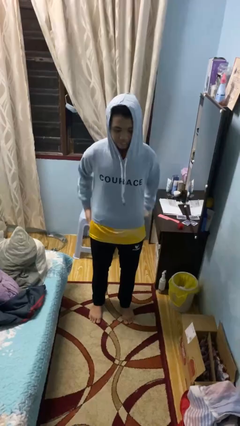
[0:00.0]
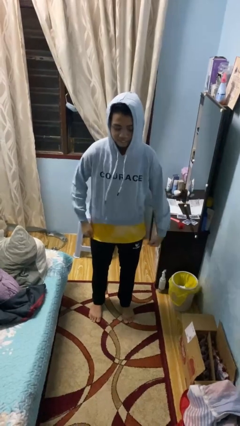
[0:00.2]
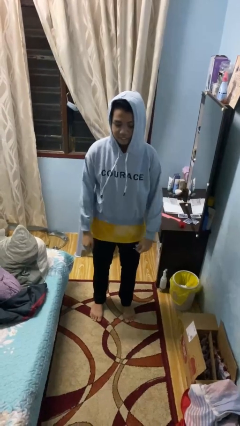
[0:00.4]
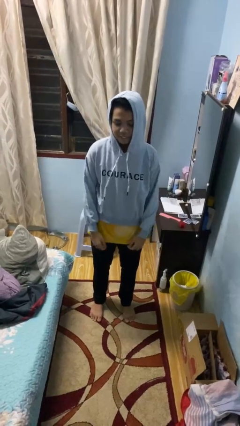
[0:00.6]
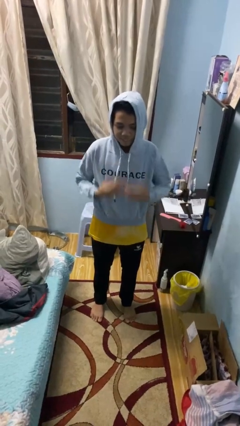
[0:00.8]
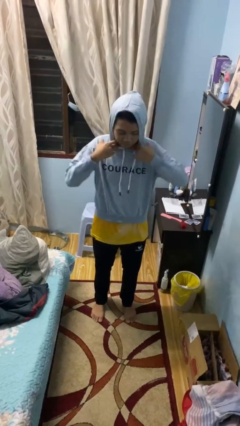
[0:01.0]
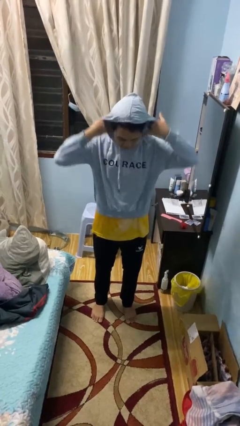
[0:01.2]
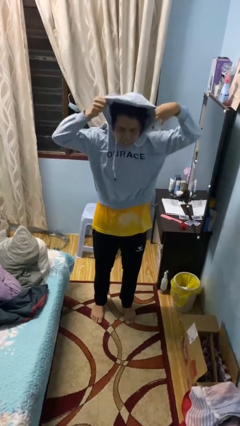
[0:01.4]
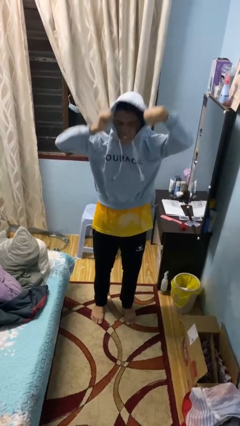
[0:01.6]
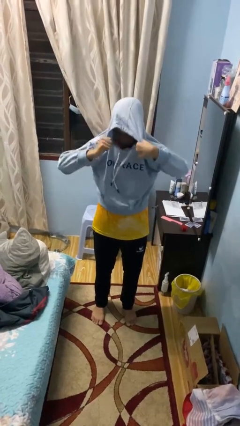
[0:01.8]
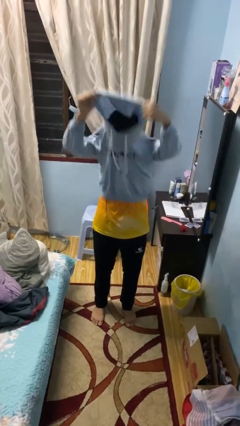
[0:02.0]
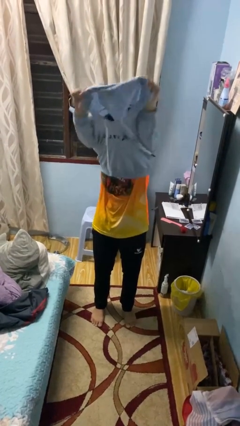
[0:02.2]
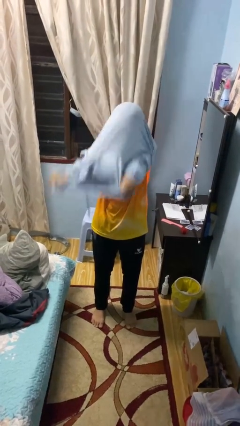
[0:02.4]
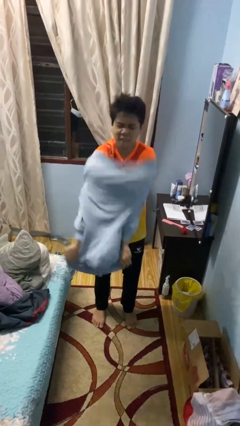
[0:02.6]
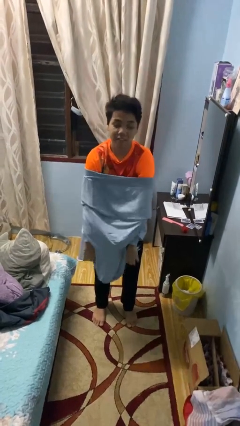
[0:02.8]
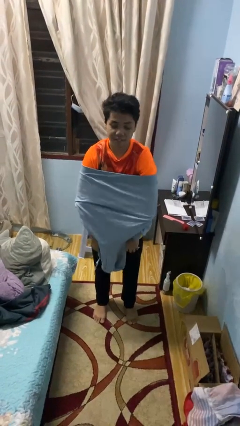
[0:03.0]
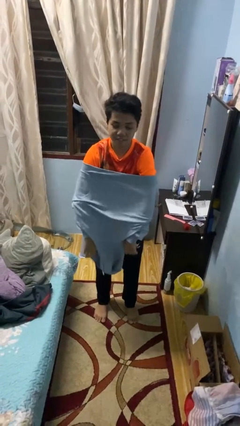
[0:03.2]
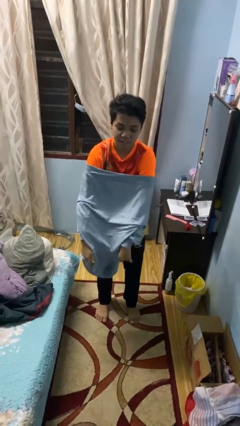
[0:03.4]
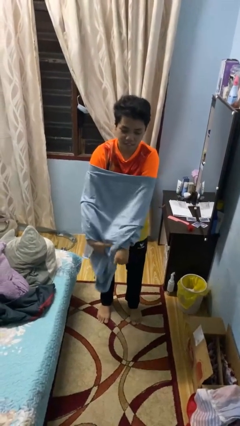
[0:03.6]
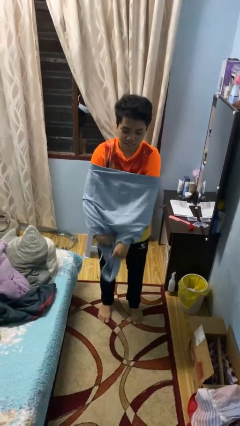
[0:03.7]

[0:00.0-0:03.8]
person takes off hoodie

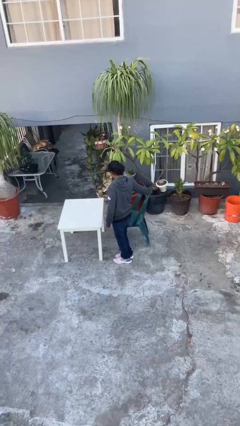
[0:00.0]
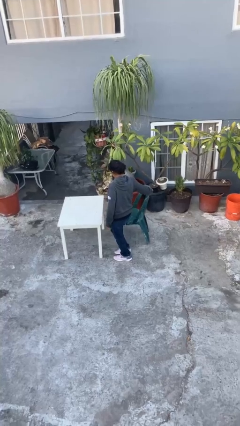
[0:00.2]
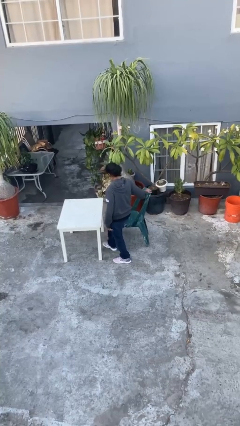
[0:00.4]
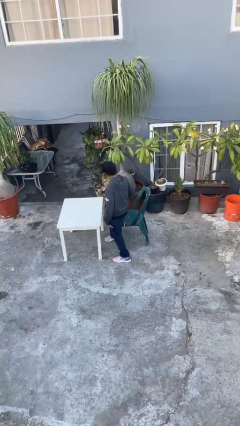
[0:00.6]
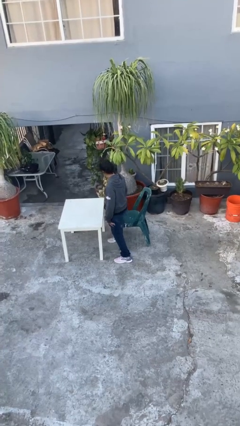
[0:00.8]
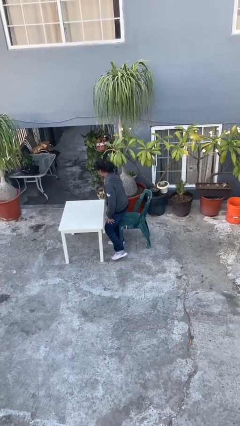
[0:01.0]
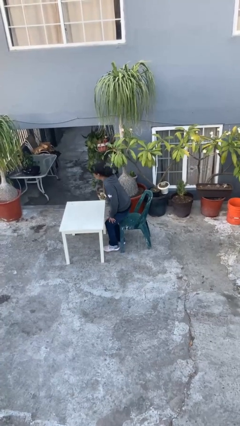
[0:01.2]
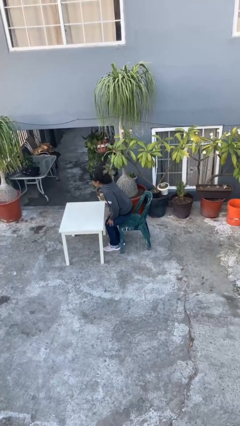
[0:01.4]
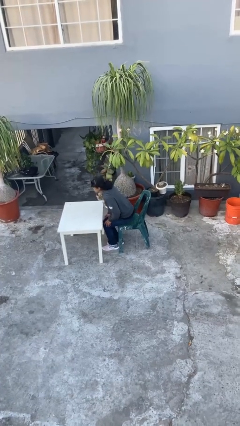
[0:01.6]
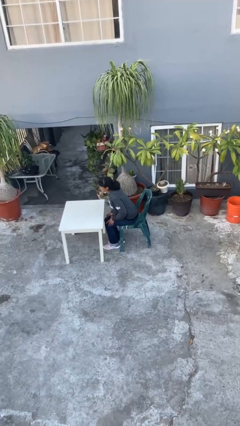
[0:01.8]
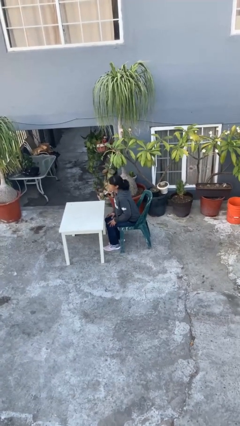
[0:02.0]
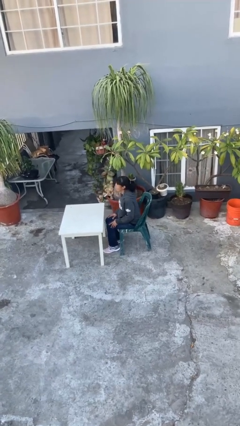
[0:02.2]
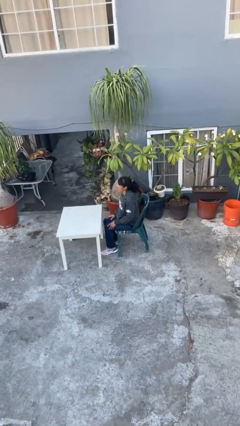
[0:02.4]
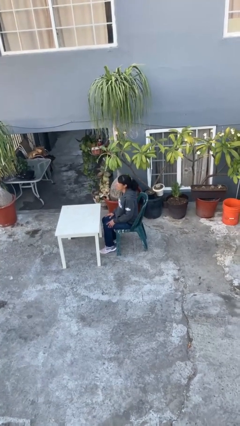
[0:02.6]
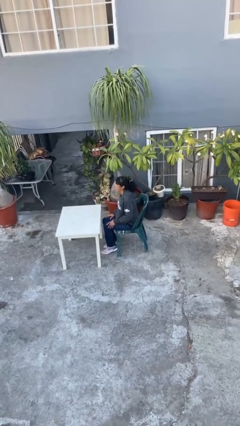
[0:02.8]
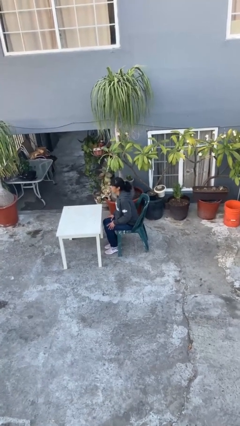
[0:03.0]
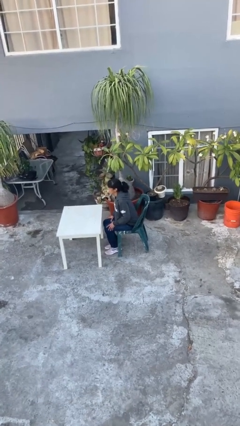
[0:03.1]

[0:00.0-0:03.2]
person sits down

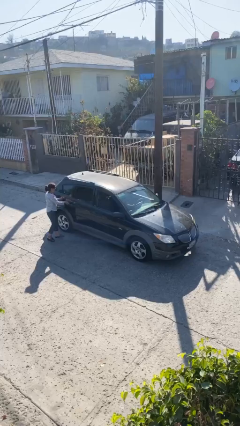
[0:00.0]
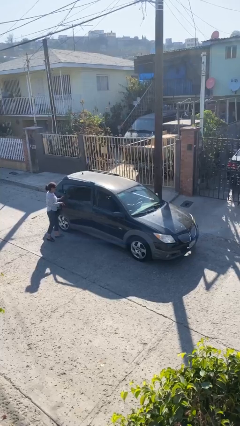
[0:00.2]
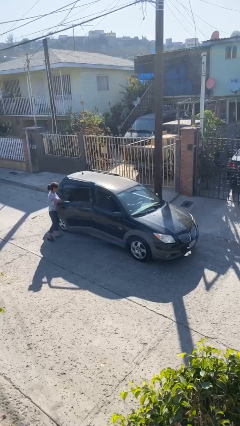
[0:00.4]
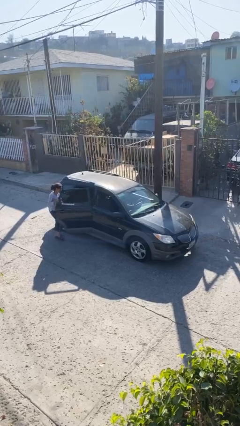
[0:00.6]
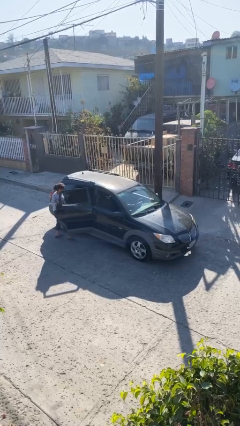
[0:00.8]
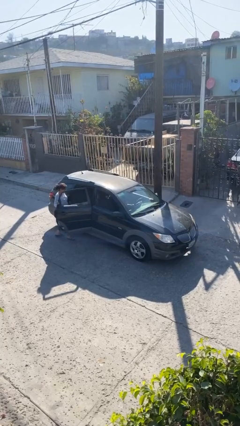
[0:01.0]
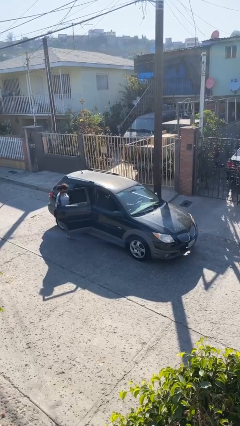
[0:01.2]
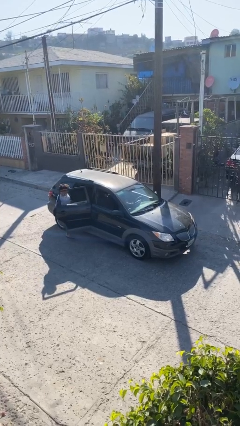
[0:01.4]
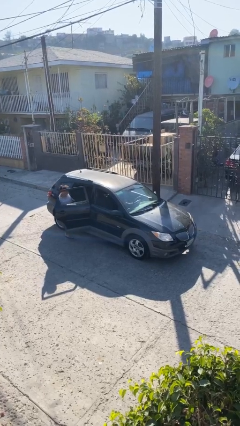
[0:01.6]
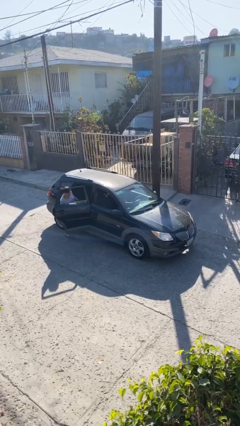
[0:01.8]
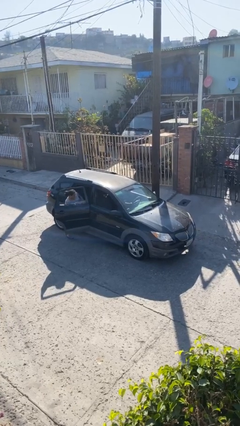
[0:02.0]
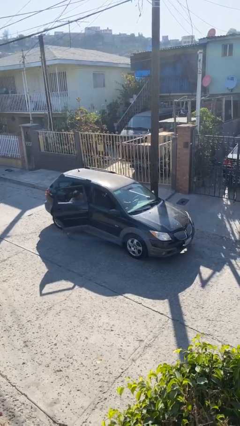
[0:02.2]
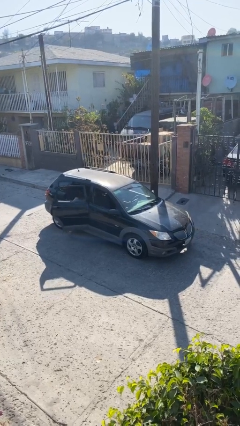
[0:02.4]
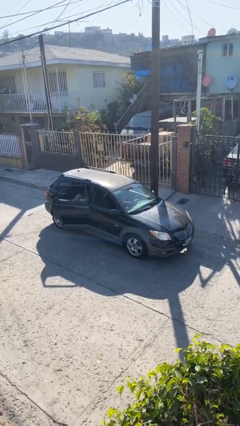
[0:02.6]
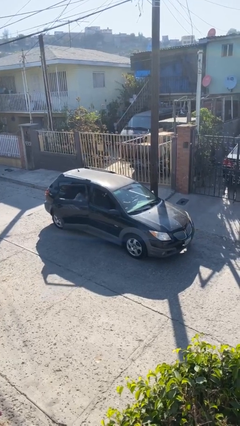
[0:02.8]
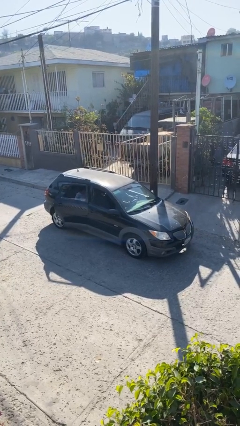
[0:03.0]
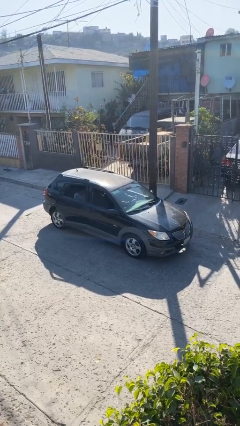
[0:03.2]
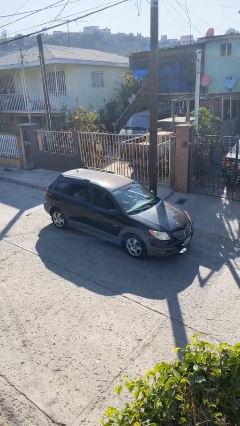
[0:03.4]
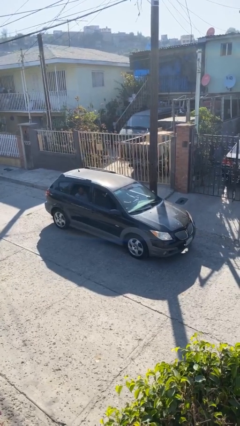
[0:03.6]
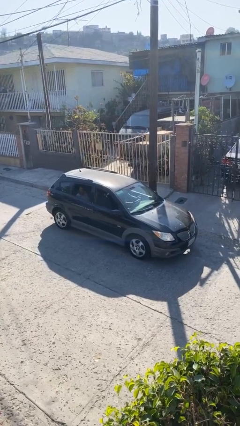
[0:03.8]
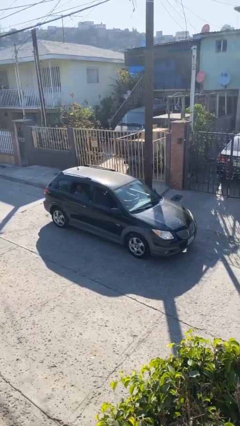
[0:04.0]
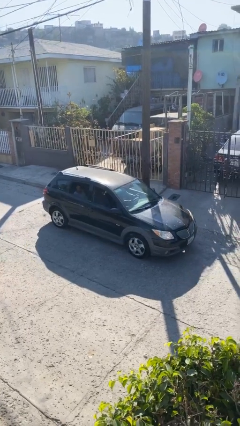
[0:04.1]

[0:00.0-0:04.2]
car picks up person

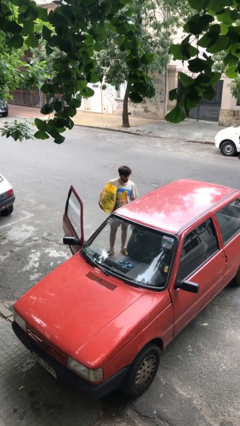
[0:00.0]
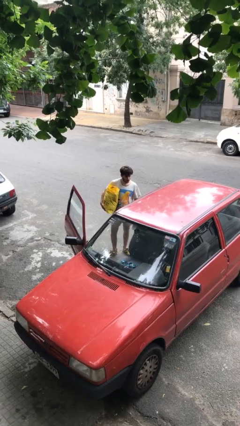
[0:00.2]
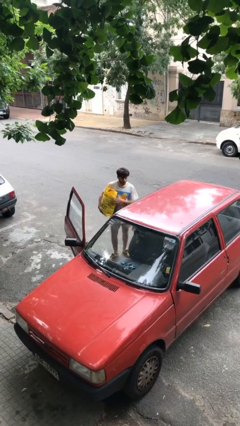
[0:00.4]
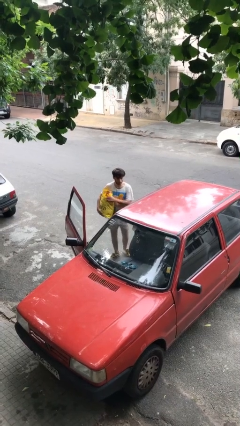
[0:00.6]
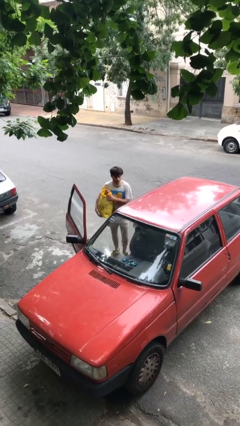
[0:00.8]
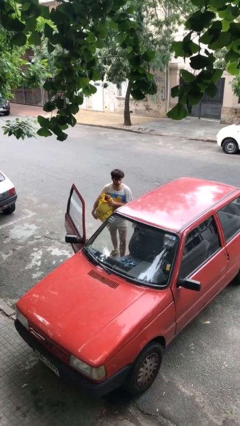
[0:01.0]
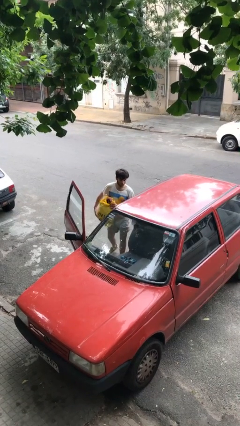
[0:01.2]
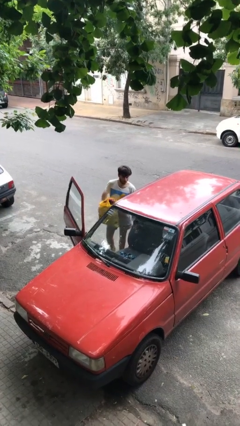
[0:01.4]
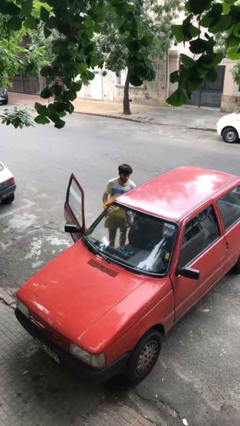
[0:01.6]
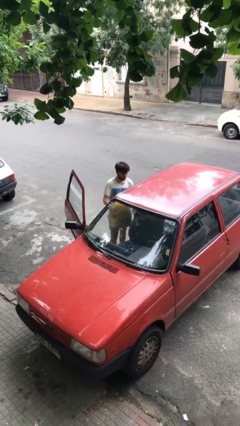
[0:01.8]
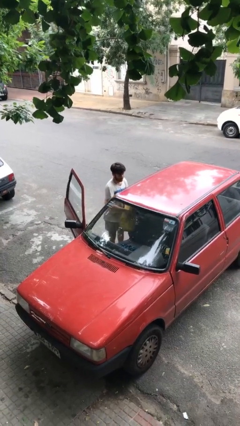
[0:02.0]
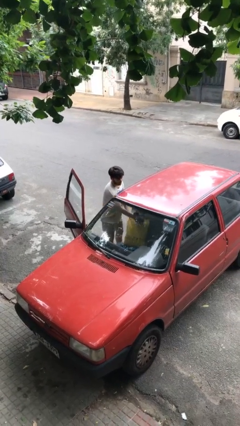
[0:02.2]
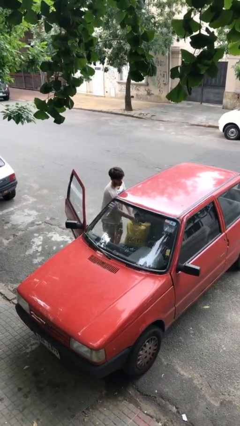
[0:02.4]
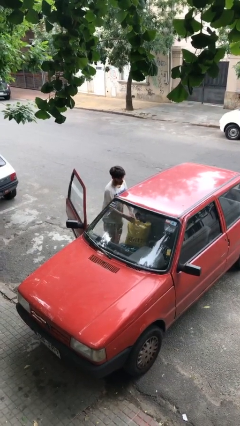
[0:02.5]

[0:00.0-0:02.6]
person loads car

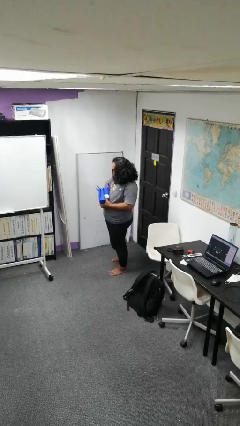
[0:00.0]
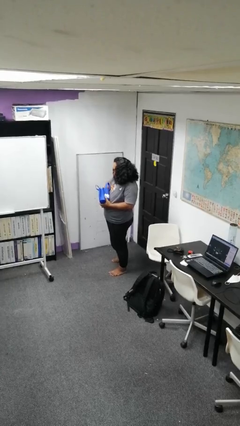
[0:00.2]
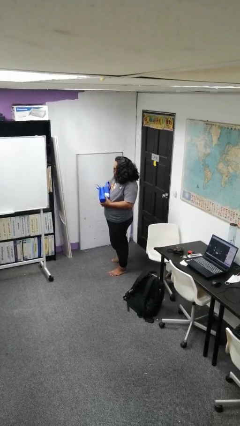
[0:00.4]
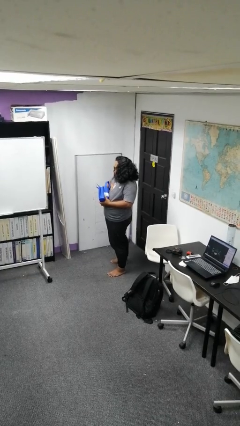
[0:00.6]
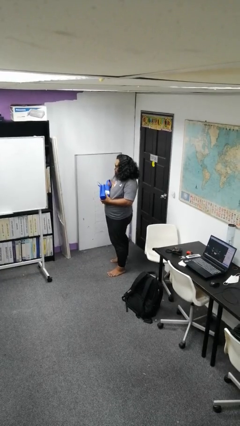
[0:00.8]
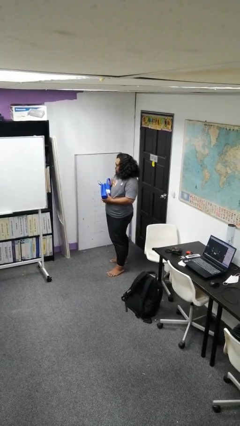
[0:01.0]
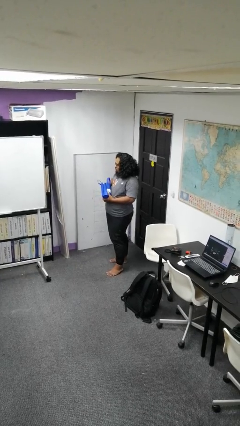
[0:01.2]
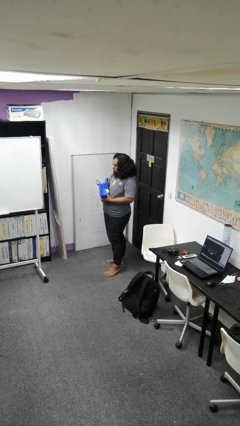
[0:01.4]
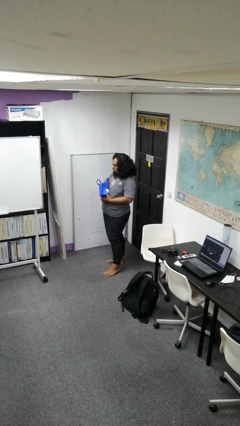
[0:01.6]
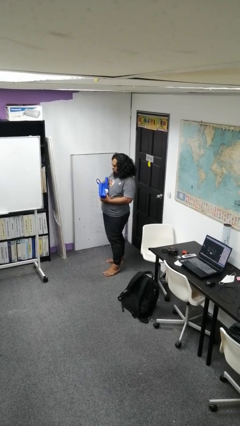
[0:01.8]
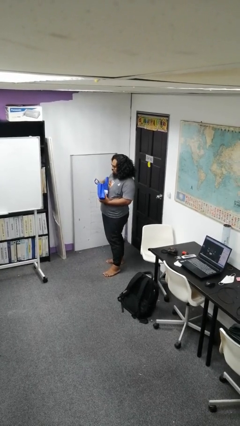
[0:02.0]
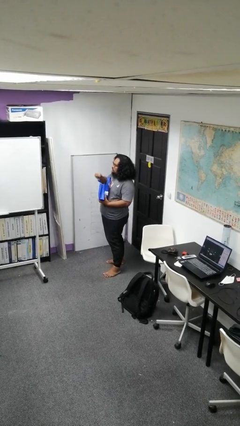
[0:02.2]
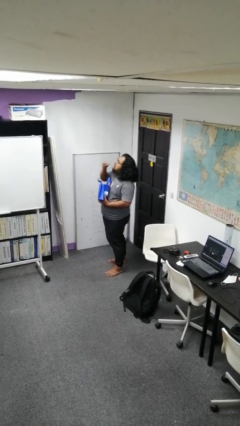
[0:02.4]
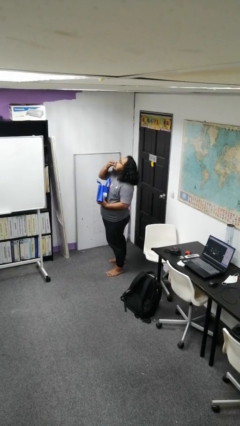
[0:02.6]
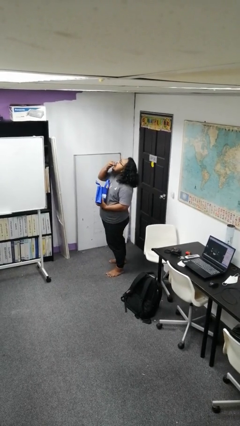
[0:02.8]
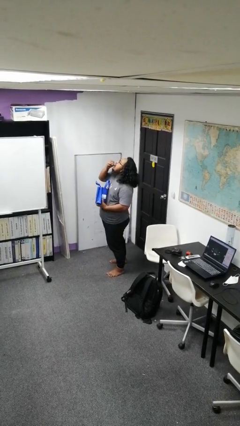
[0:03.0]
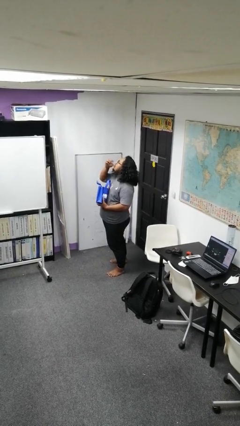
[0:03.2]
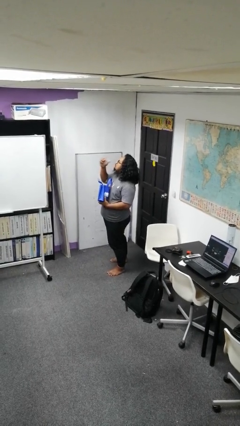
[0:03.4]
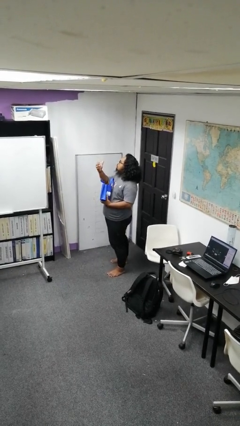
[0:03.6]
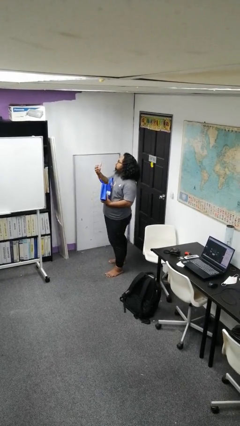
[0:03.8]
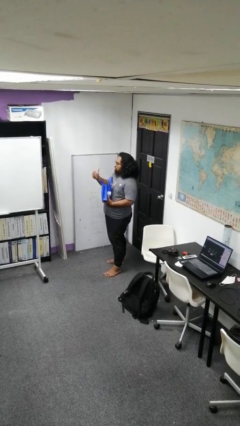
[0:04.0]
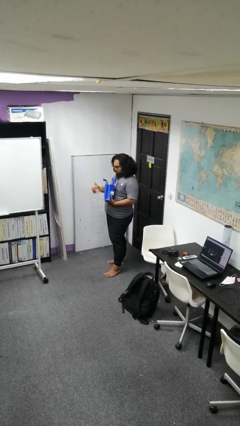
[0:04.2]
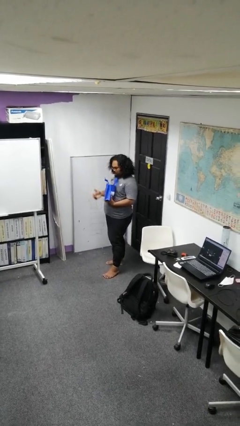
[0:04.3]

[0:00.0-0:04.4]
person eats snack from bag
